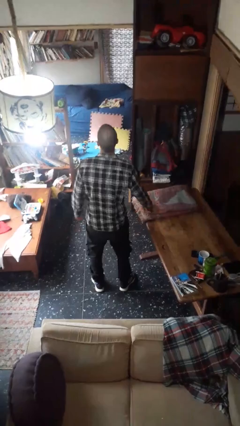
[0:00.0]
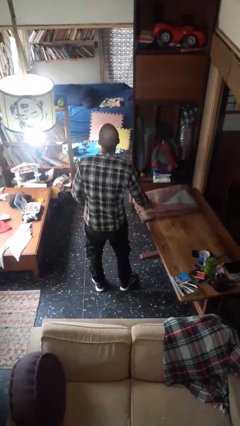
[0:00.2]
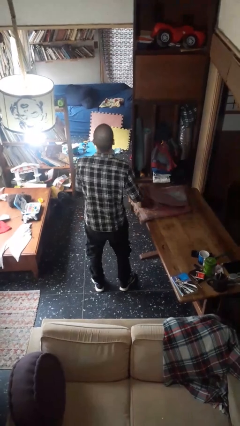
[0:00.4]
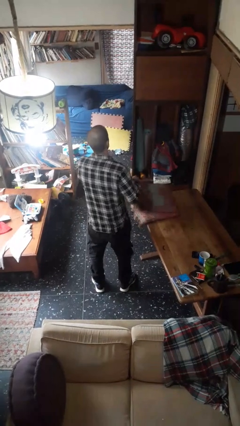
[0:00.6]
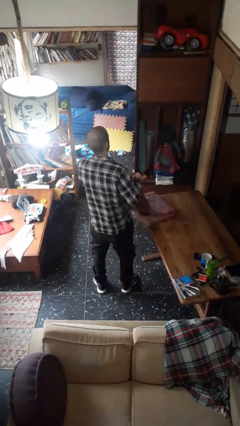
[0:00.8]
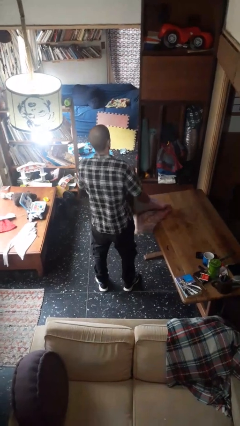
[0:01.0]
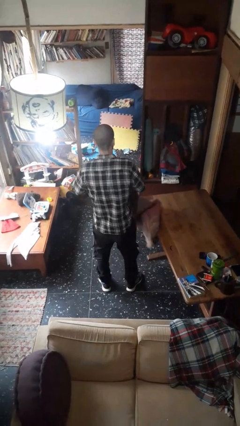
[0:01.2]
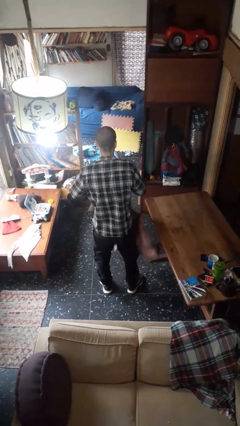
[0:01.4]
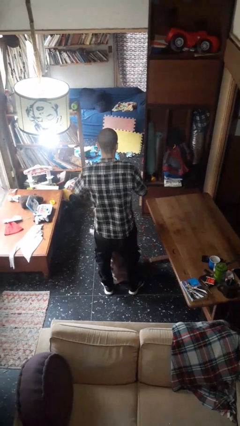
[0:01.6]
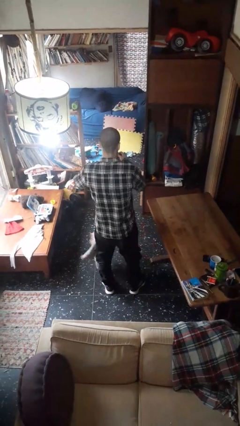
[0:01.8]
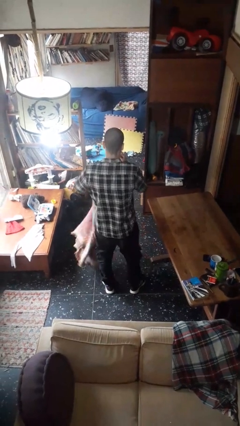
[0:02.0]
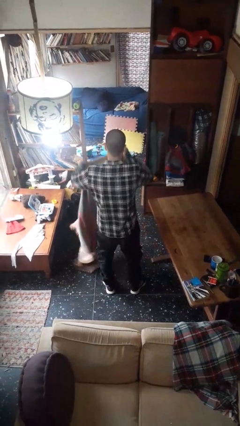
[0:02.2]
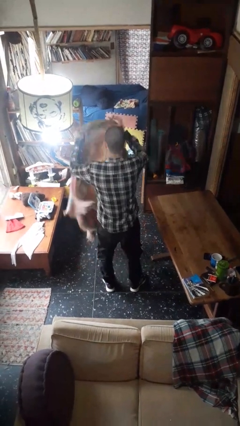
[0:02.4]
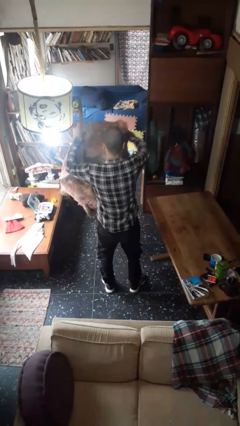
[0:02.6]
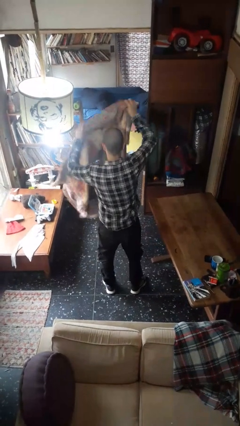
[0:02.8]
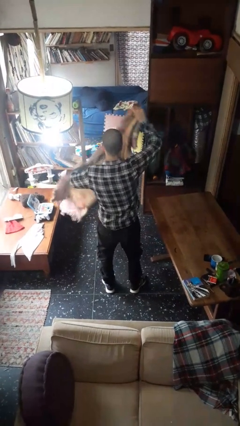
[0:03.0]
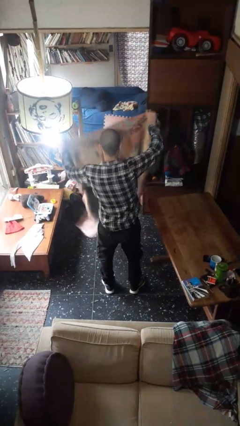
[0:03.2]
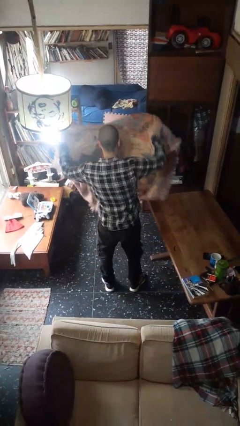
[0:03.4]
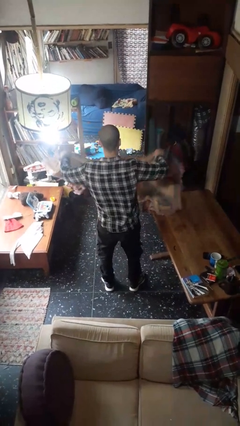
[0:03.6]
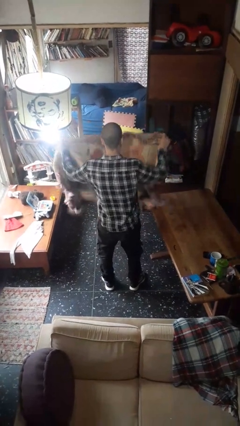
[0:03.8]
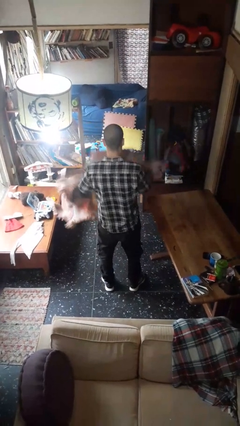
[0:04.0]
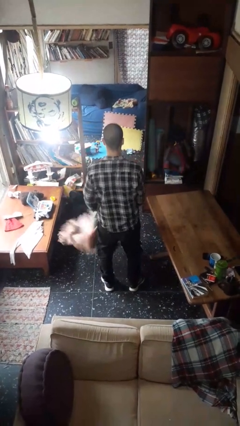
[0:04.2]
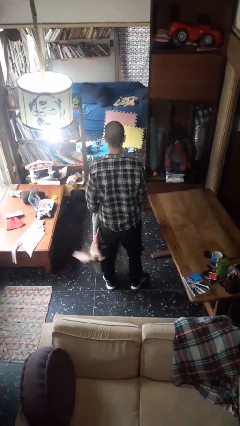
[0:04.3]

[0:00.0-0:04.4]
person unfolds blanket

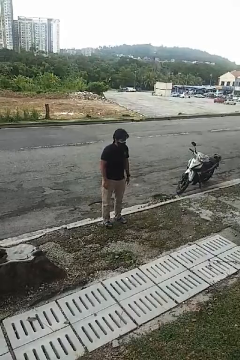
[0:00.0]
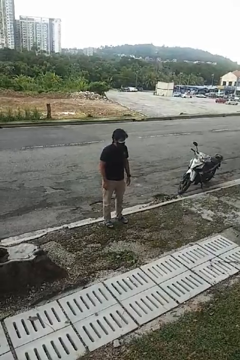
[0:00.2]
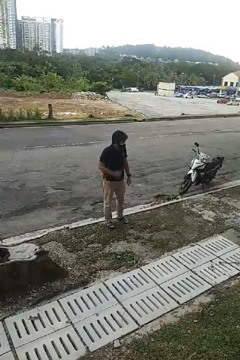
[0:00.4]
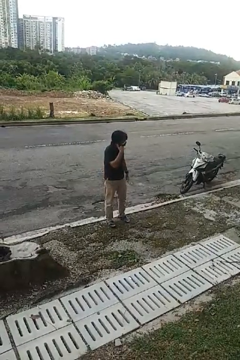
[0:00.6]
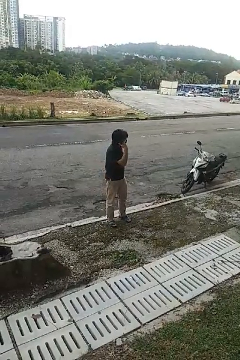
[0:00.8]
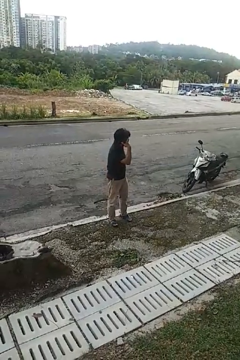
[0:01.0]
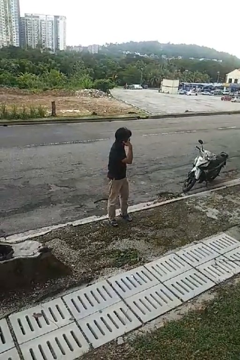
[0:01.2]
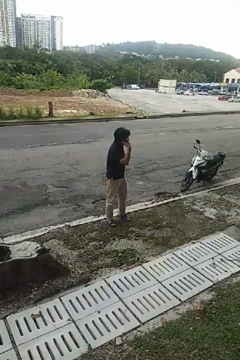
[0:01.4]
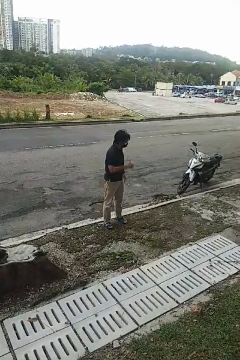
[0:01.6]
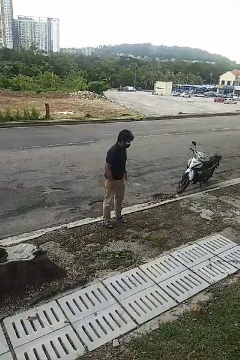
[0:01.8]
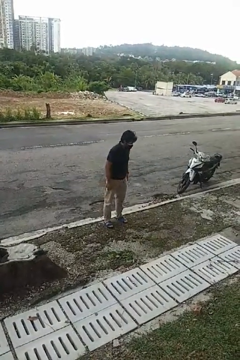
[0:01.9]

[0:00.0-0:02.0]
person gestures call me

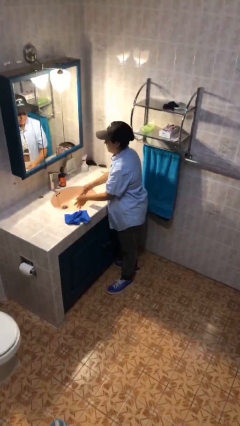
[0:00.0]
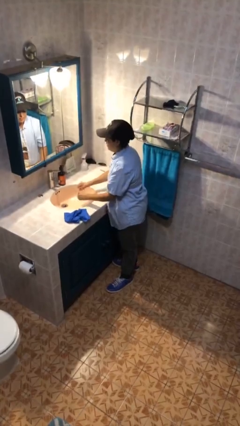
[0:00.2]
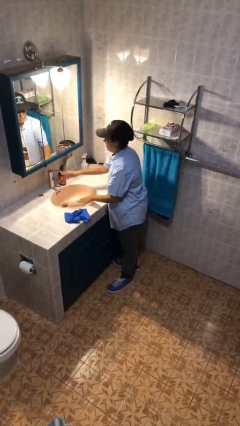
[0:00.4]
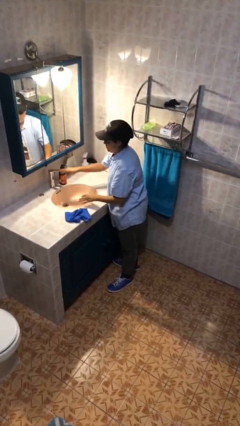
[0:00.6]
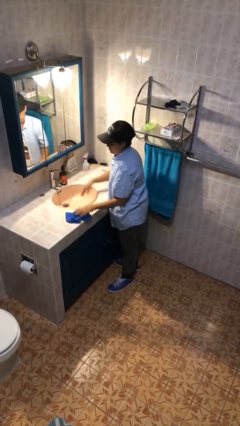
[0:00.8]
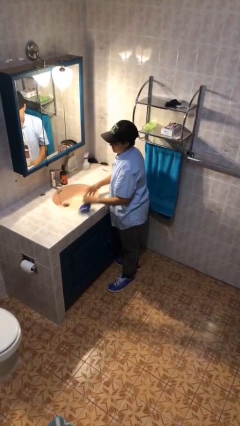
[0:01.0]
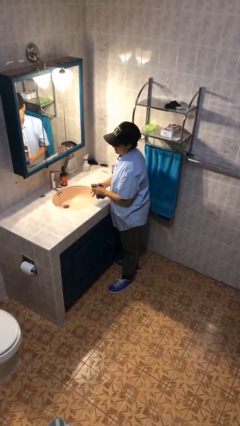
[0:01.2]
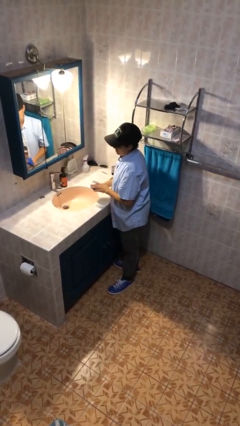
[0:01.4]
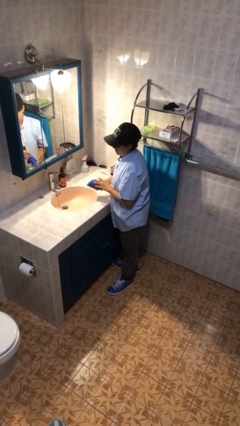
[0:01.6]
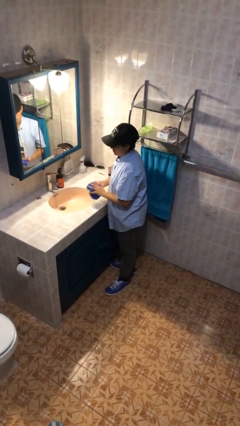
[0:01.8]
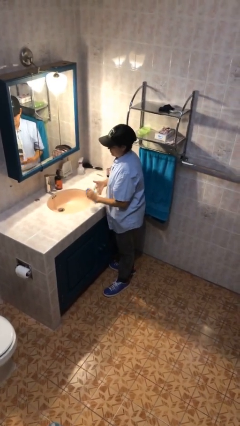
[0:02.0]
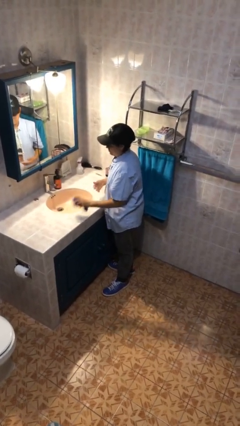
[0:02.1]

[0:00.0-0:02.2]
person dries hands with towel

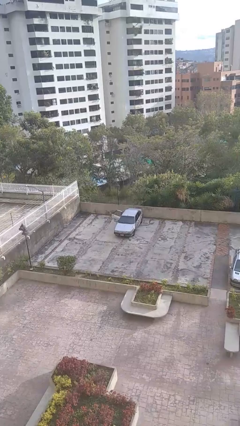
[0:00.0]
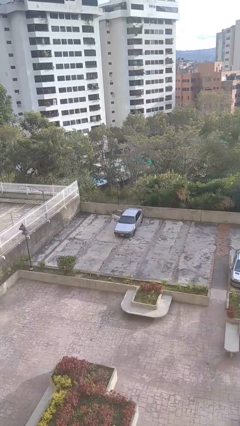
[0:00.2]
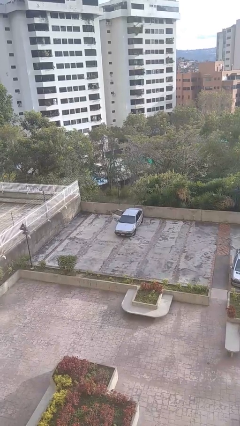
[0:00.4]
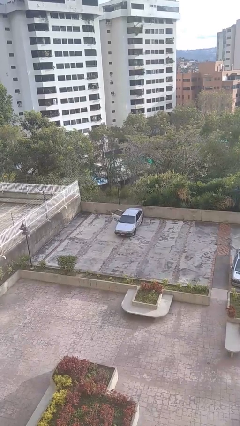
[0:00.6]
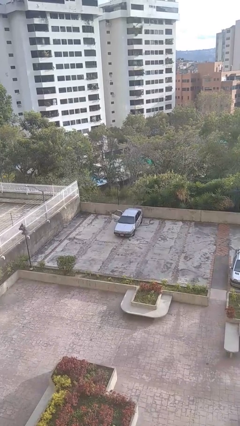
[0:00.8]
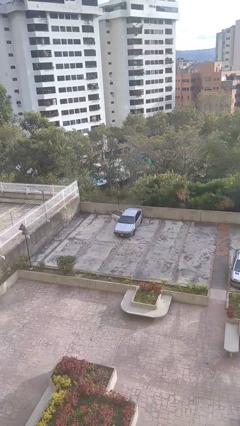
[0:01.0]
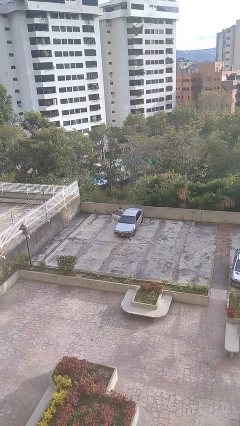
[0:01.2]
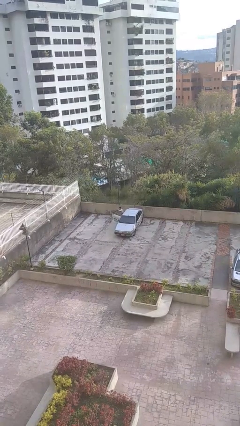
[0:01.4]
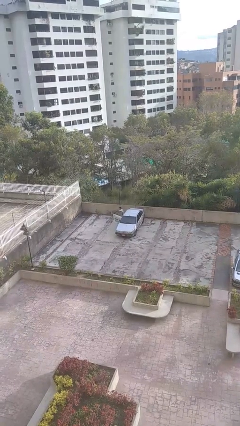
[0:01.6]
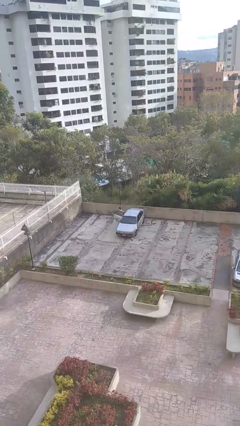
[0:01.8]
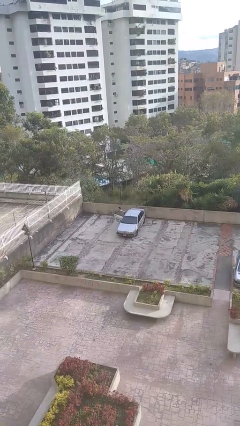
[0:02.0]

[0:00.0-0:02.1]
person exits car

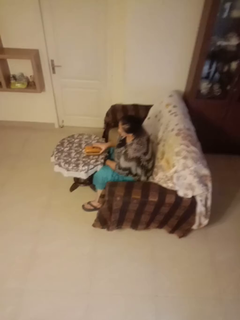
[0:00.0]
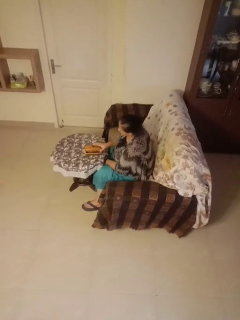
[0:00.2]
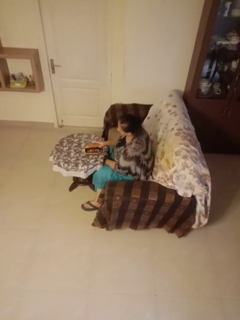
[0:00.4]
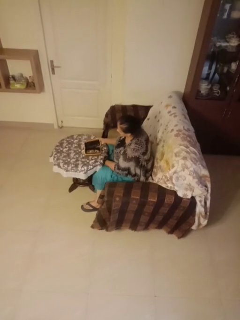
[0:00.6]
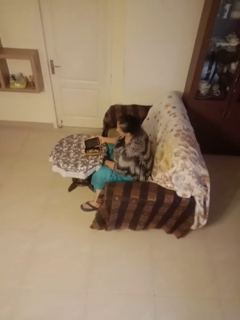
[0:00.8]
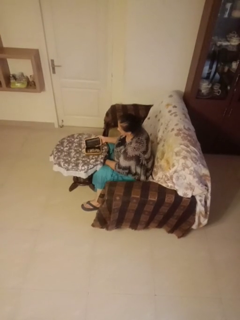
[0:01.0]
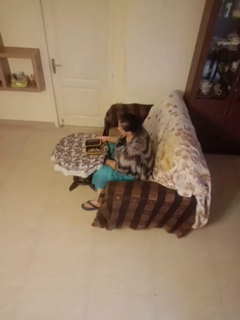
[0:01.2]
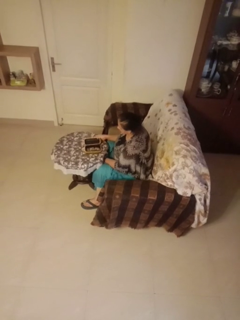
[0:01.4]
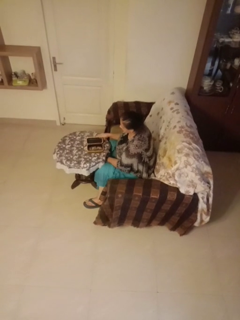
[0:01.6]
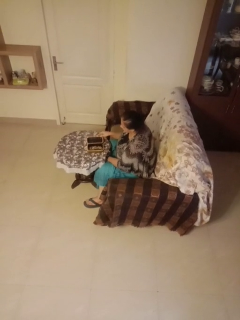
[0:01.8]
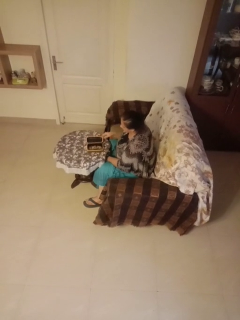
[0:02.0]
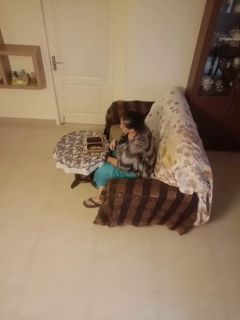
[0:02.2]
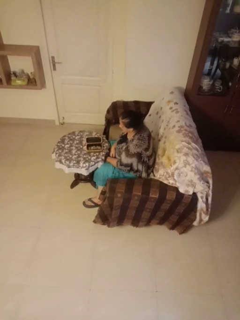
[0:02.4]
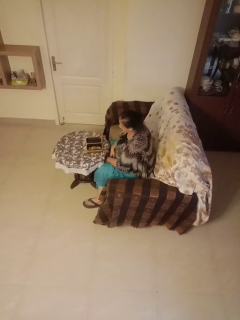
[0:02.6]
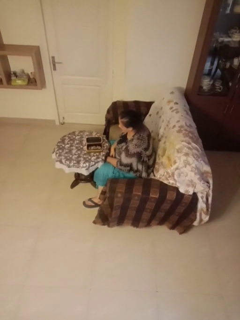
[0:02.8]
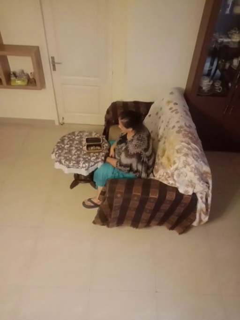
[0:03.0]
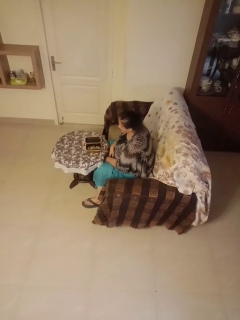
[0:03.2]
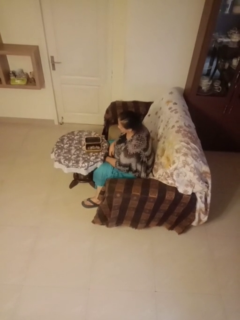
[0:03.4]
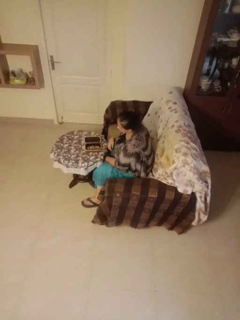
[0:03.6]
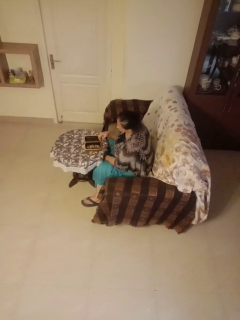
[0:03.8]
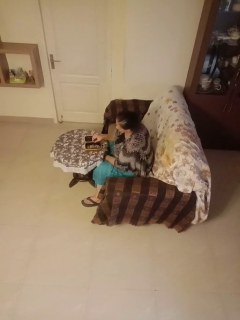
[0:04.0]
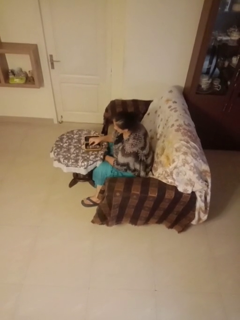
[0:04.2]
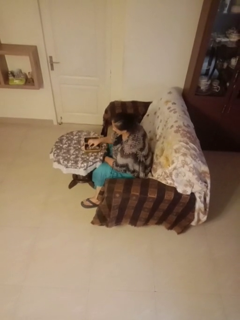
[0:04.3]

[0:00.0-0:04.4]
person opens jewelry box

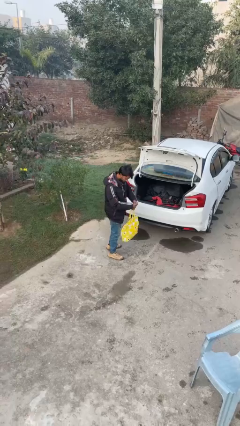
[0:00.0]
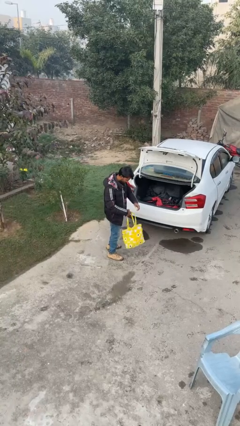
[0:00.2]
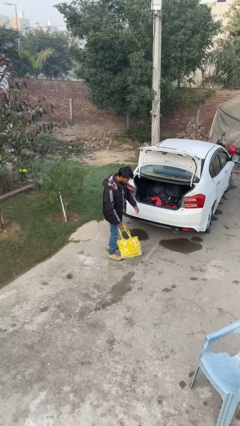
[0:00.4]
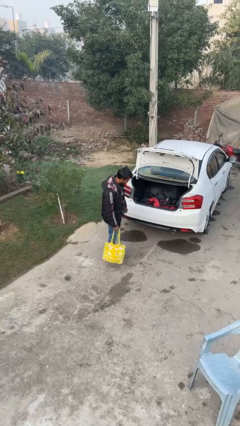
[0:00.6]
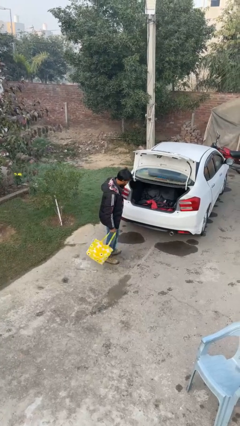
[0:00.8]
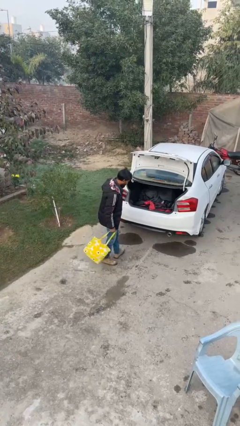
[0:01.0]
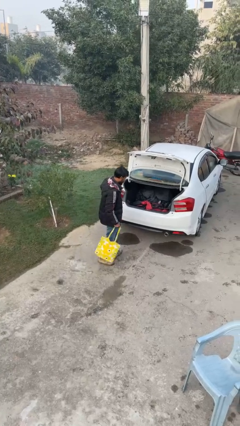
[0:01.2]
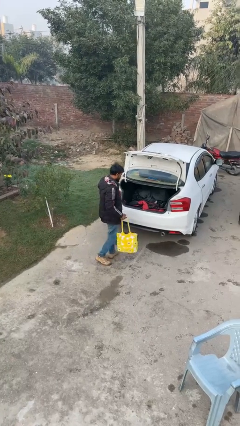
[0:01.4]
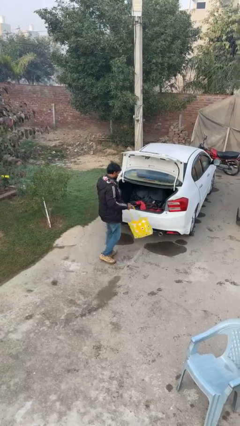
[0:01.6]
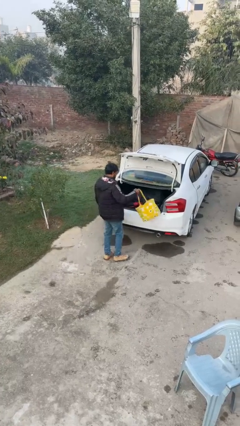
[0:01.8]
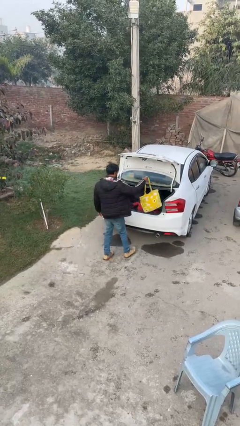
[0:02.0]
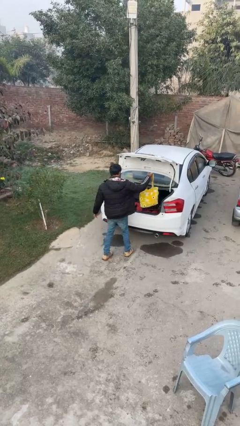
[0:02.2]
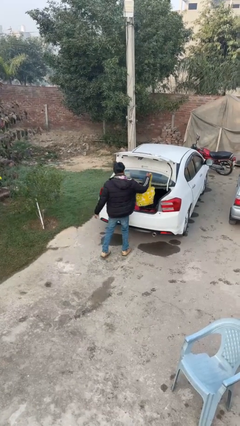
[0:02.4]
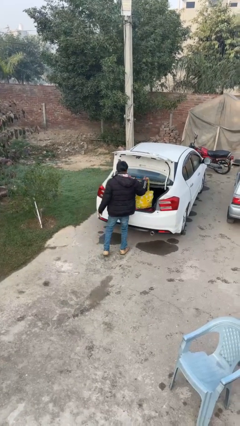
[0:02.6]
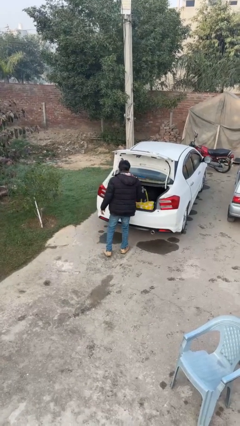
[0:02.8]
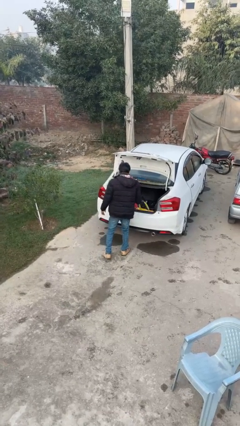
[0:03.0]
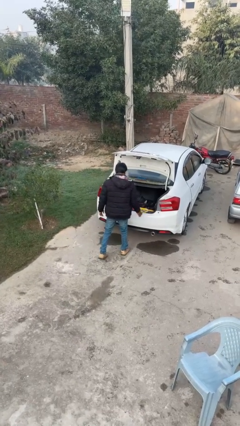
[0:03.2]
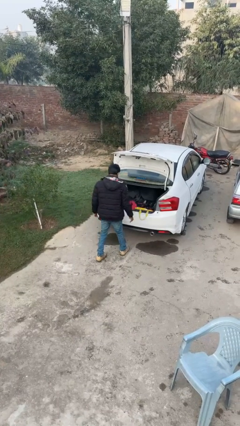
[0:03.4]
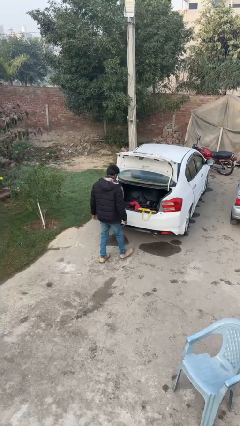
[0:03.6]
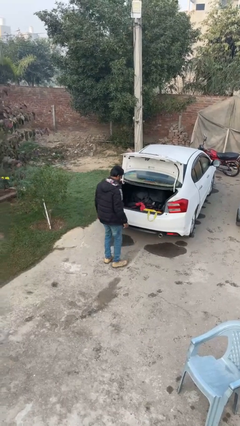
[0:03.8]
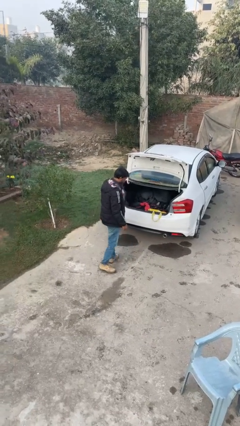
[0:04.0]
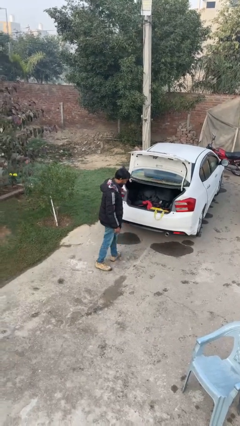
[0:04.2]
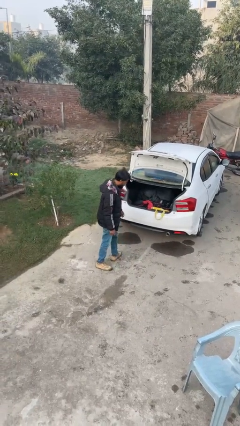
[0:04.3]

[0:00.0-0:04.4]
person loads car
